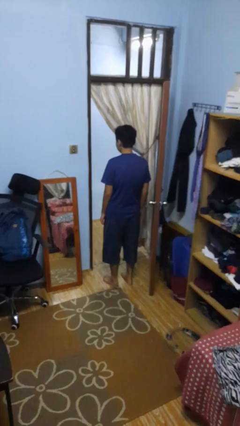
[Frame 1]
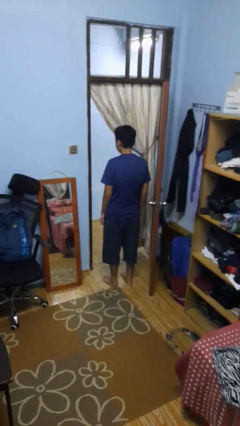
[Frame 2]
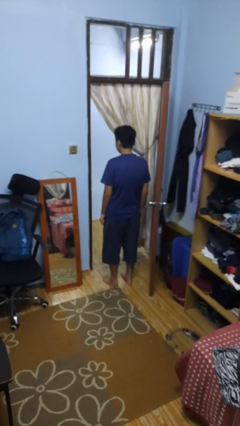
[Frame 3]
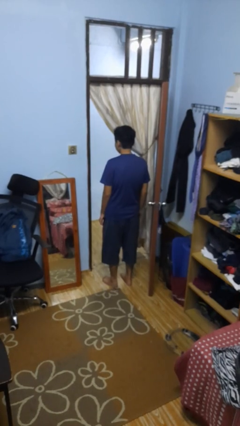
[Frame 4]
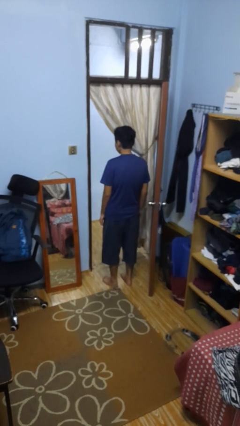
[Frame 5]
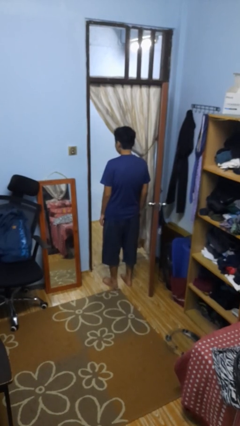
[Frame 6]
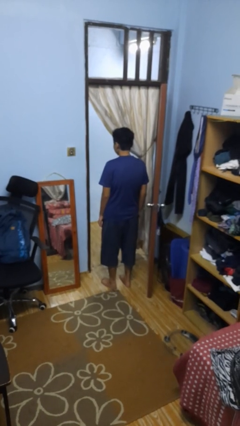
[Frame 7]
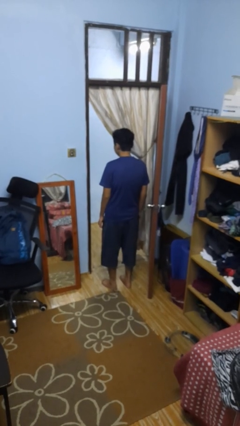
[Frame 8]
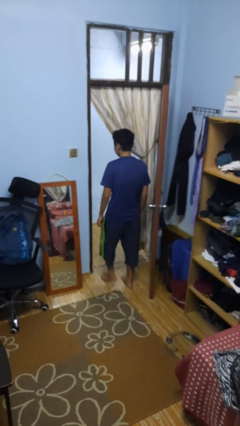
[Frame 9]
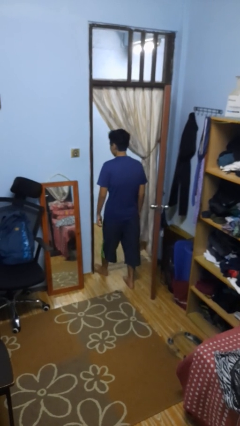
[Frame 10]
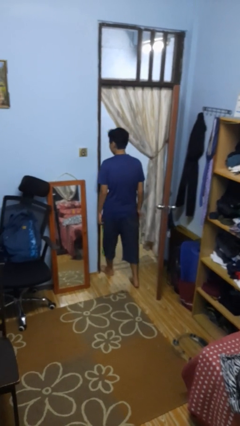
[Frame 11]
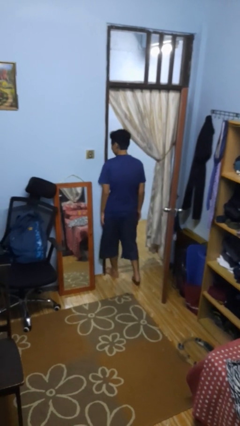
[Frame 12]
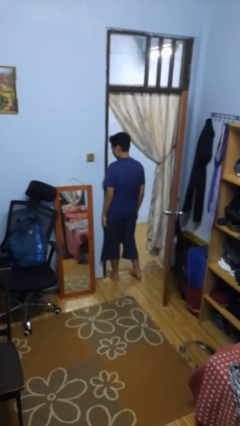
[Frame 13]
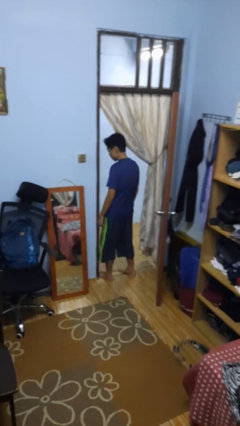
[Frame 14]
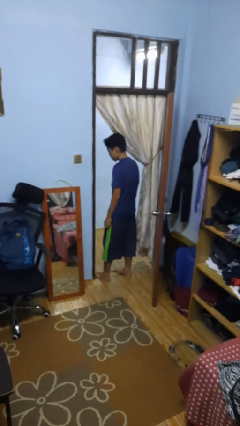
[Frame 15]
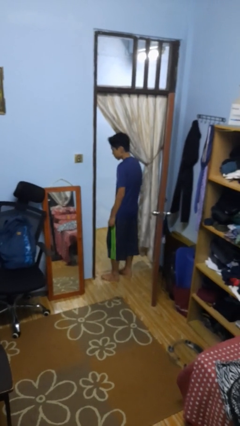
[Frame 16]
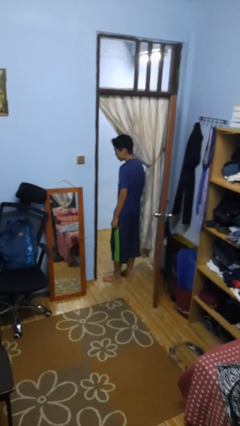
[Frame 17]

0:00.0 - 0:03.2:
person bumps into wall

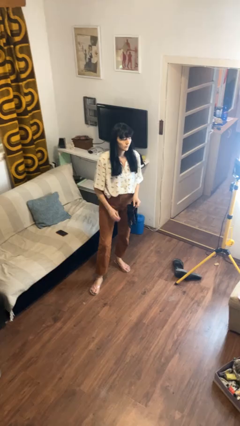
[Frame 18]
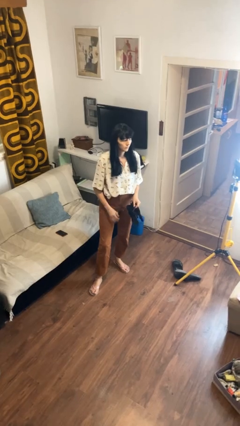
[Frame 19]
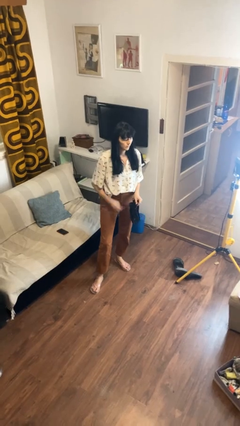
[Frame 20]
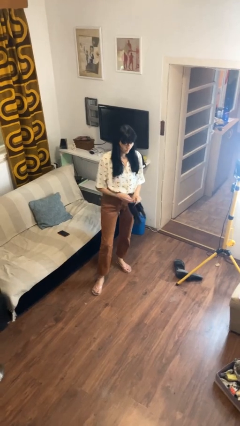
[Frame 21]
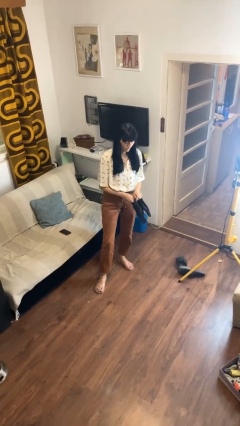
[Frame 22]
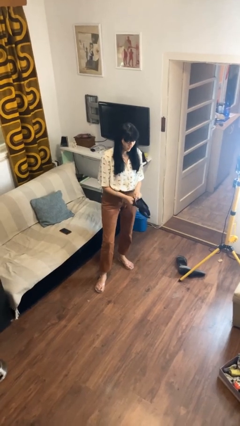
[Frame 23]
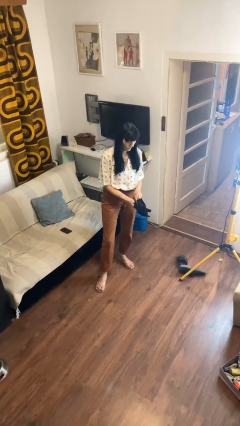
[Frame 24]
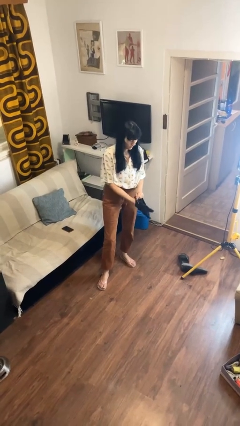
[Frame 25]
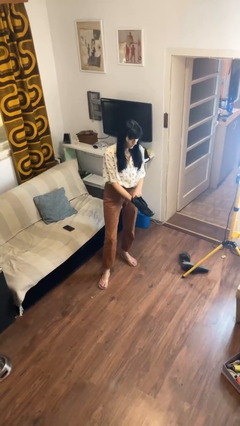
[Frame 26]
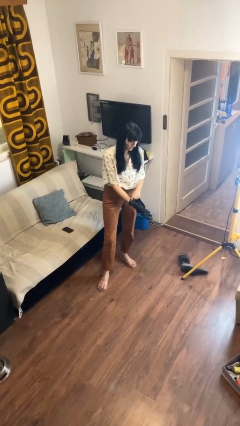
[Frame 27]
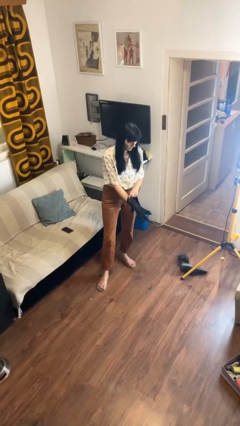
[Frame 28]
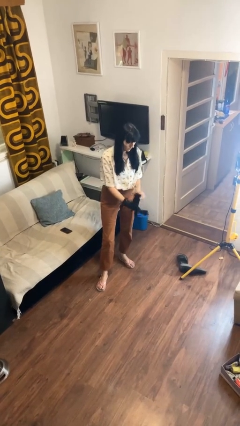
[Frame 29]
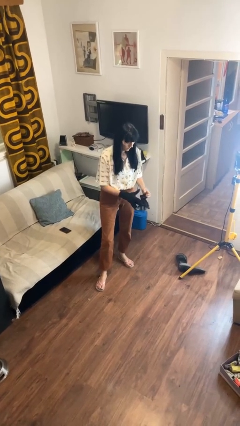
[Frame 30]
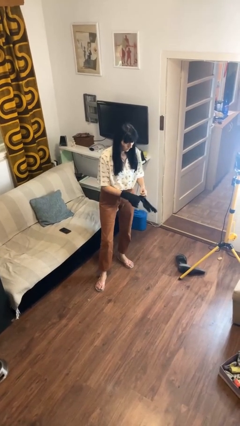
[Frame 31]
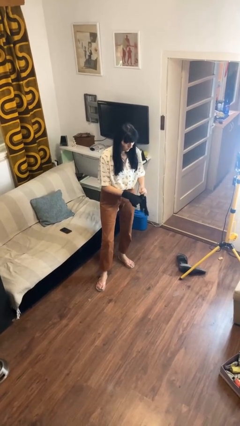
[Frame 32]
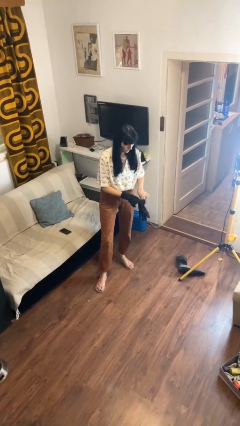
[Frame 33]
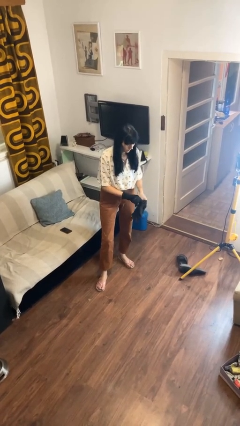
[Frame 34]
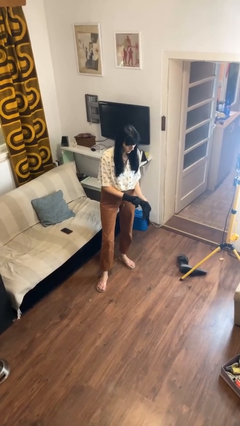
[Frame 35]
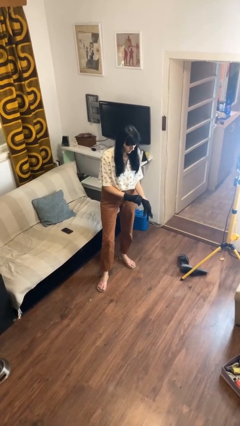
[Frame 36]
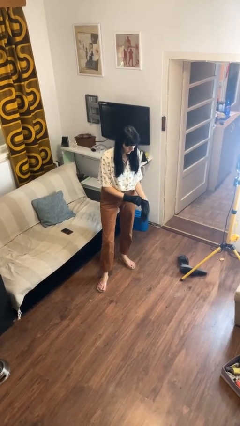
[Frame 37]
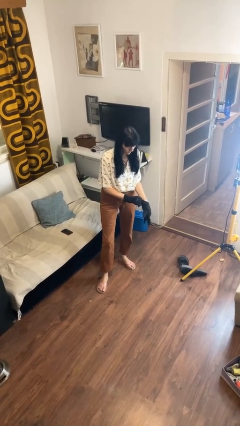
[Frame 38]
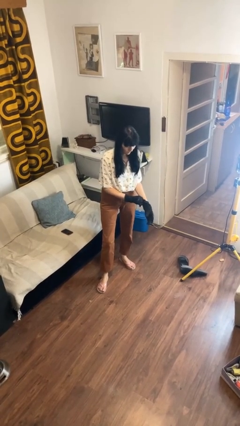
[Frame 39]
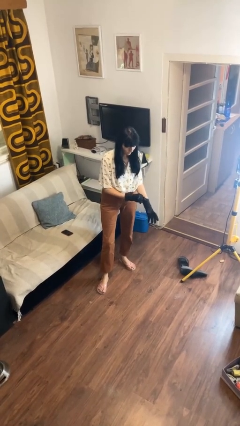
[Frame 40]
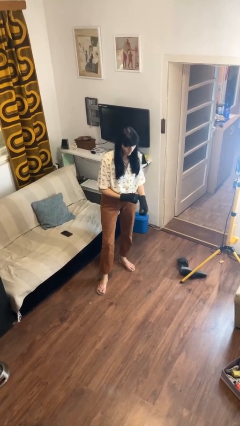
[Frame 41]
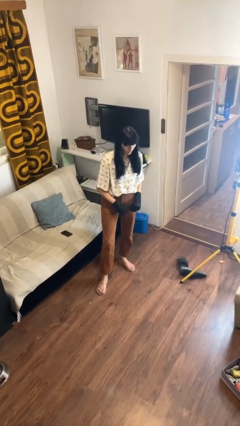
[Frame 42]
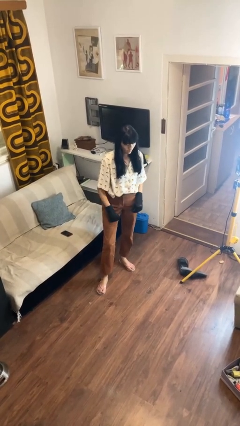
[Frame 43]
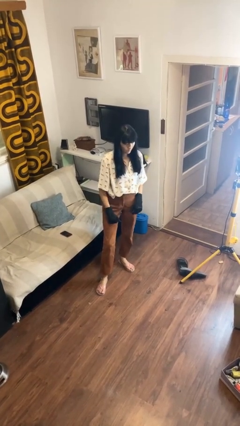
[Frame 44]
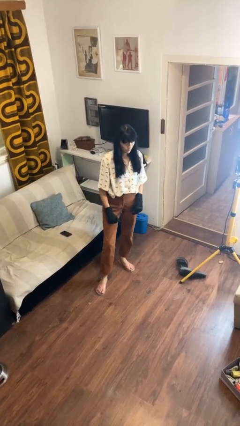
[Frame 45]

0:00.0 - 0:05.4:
person puts on gloves

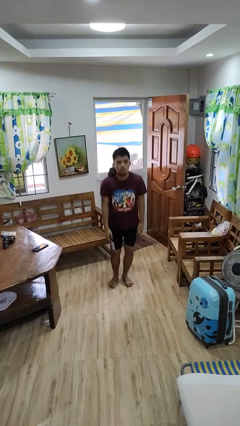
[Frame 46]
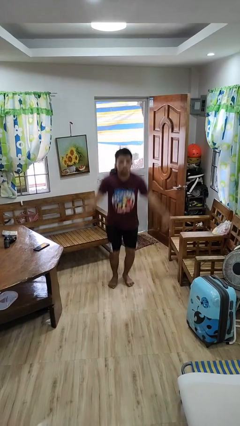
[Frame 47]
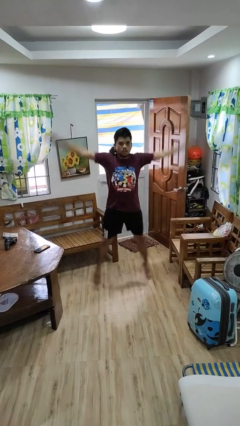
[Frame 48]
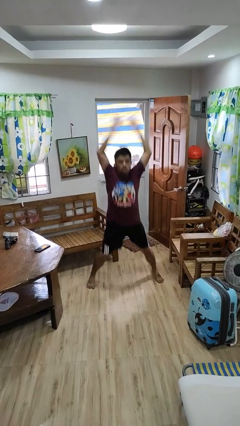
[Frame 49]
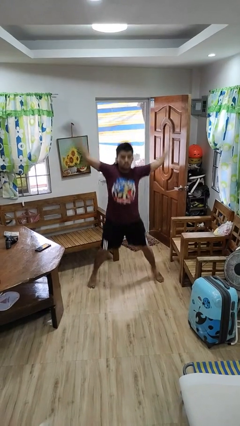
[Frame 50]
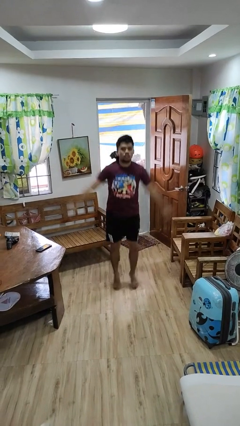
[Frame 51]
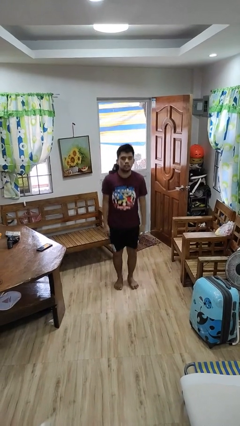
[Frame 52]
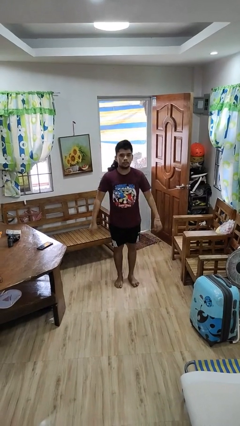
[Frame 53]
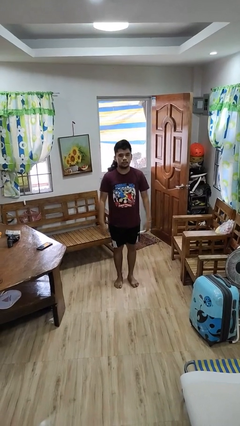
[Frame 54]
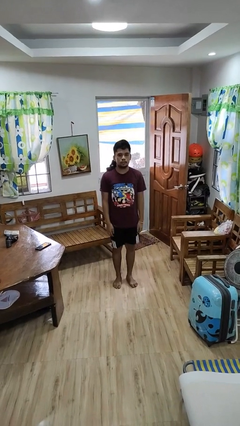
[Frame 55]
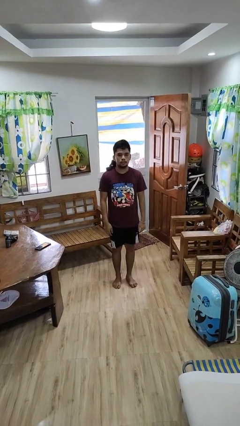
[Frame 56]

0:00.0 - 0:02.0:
person exercises with jumping jacks

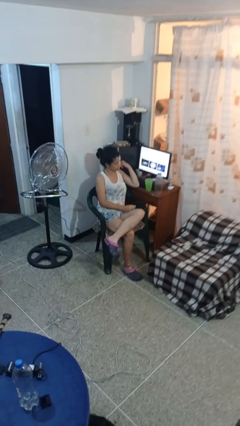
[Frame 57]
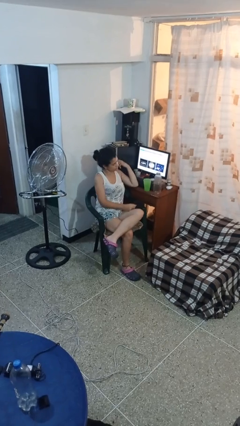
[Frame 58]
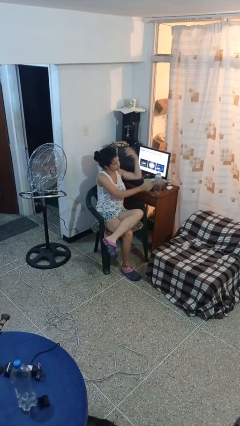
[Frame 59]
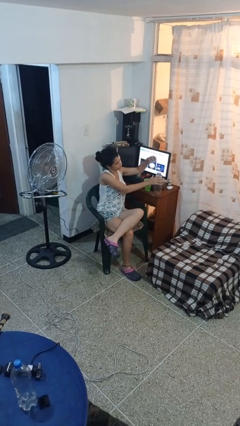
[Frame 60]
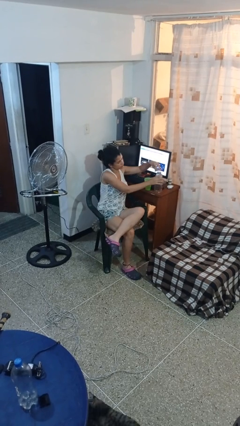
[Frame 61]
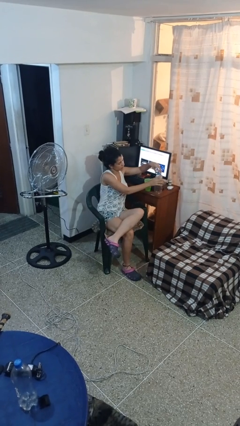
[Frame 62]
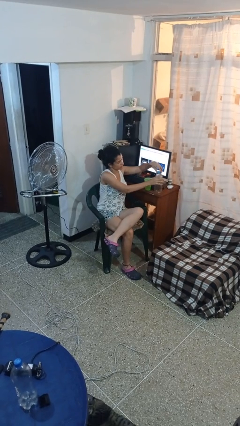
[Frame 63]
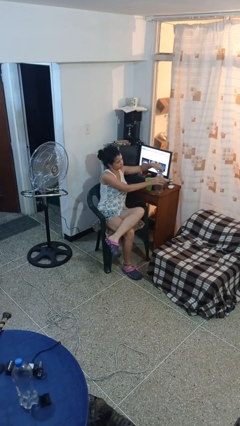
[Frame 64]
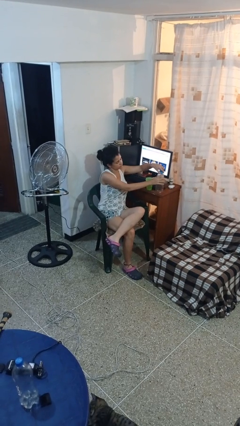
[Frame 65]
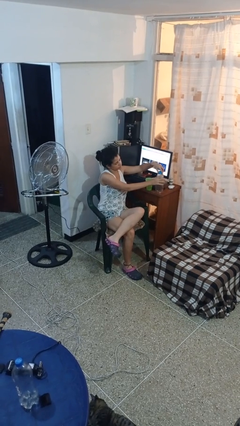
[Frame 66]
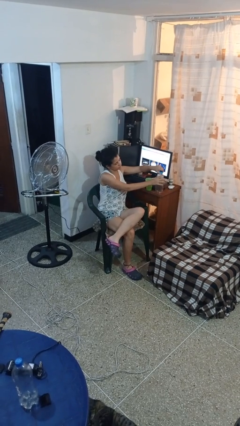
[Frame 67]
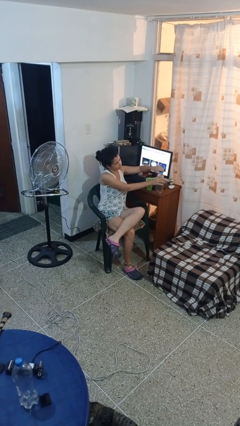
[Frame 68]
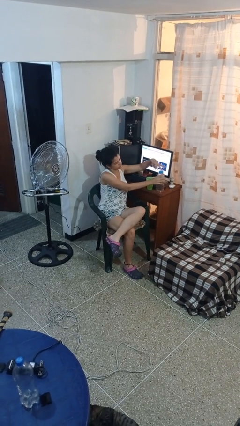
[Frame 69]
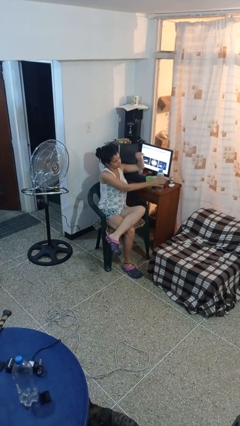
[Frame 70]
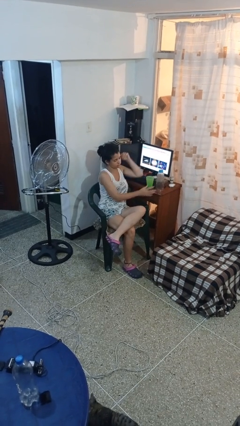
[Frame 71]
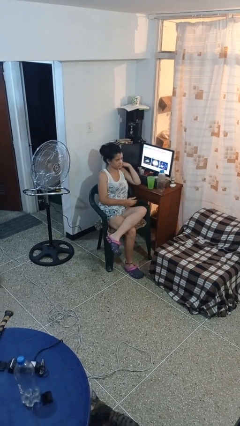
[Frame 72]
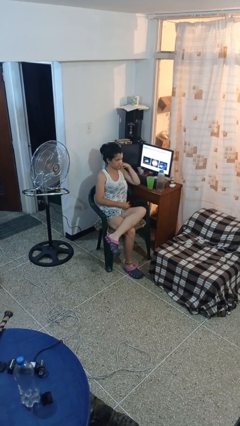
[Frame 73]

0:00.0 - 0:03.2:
person screws lid to bottle

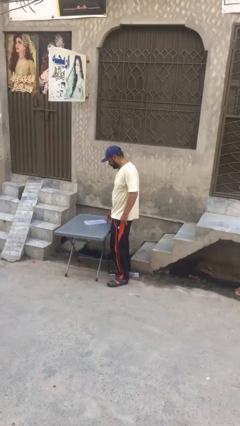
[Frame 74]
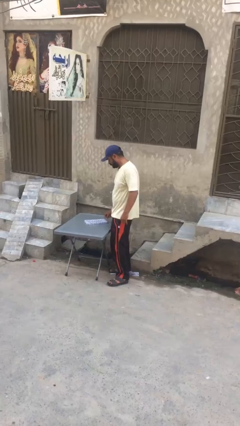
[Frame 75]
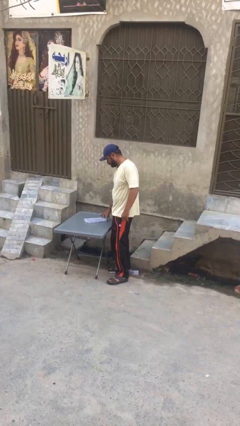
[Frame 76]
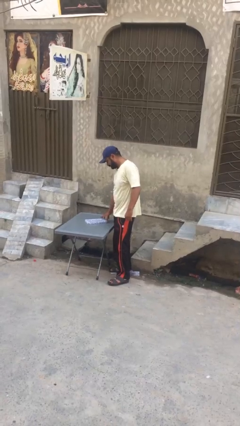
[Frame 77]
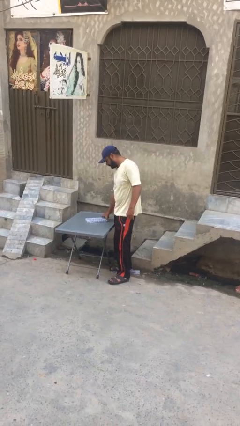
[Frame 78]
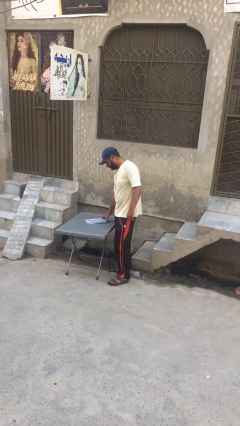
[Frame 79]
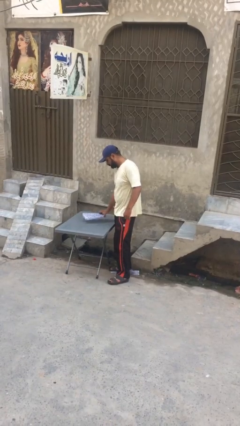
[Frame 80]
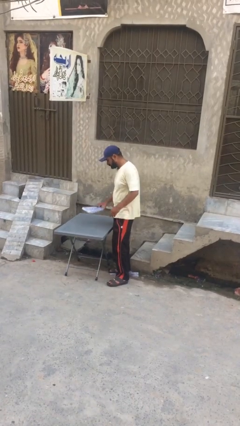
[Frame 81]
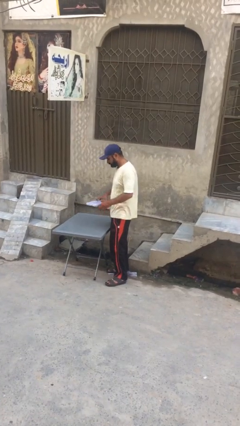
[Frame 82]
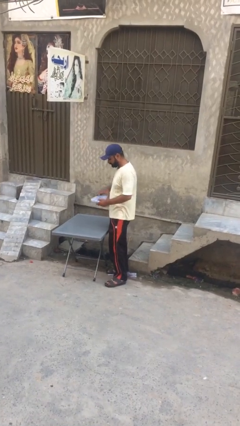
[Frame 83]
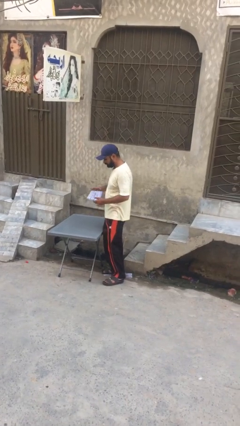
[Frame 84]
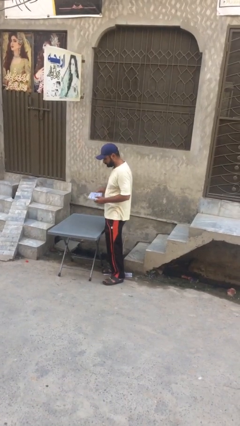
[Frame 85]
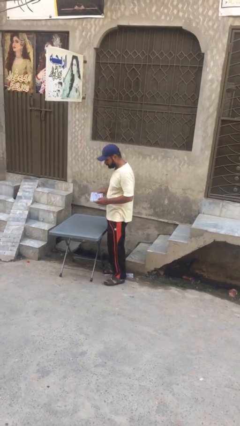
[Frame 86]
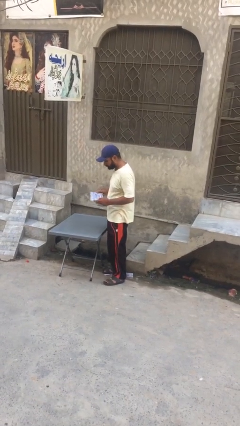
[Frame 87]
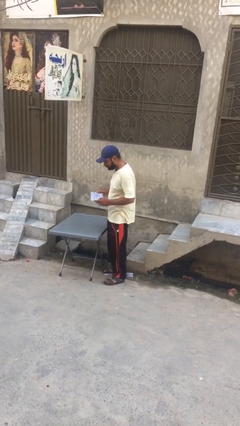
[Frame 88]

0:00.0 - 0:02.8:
person picks up object from table

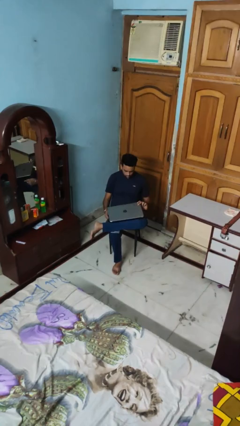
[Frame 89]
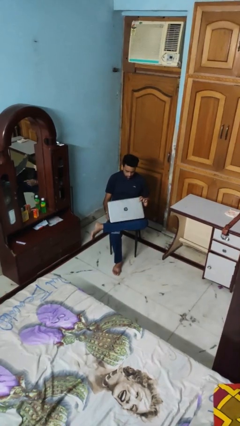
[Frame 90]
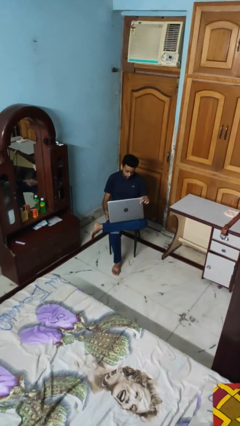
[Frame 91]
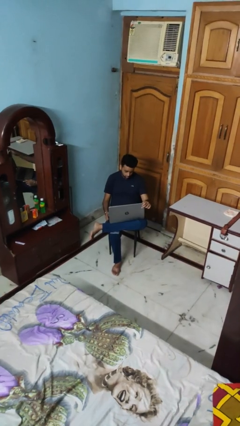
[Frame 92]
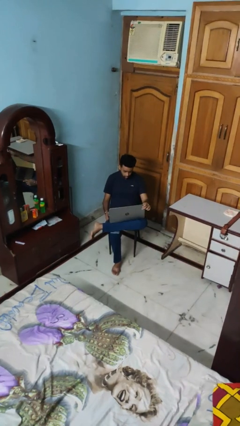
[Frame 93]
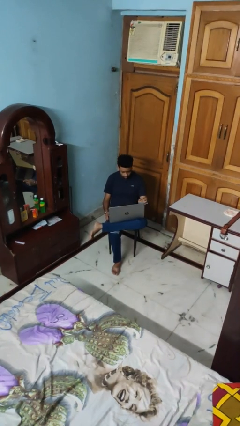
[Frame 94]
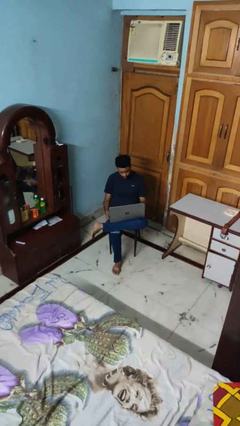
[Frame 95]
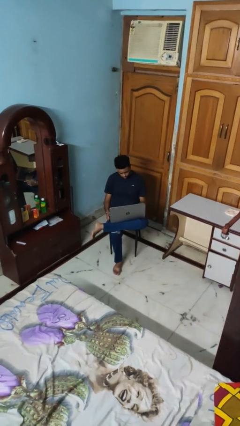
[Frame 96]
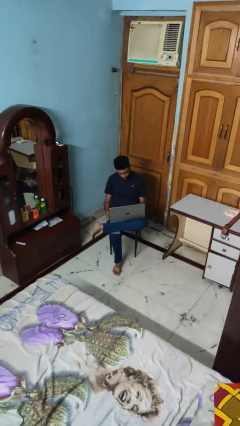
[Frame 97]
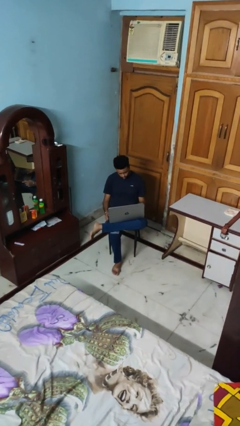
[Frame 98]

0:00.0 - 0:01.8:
person opens laptop
